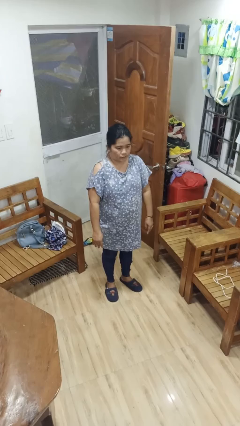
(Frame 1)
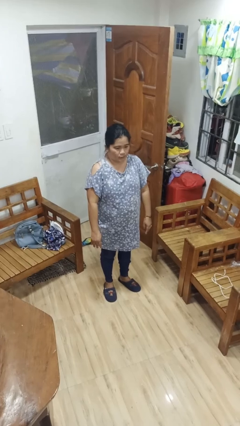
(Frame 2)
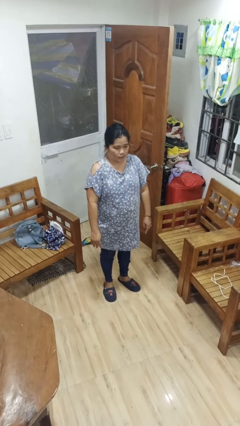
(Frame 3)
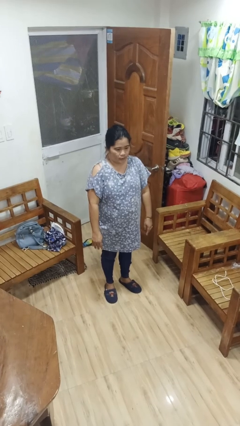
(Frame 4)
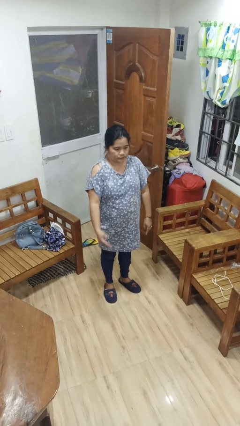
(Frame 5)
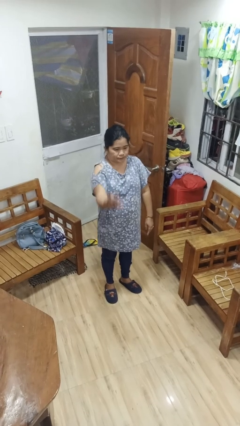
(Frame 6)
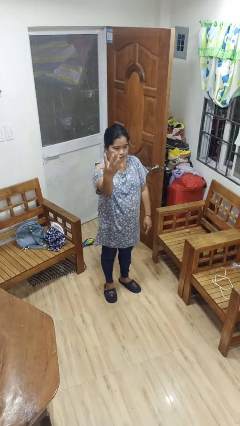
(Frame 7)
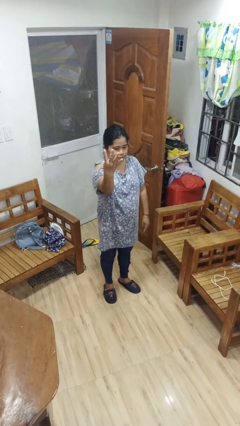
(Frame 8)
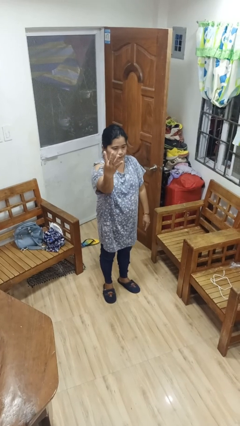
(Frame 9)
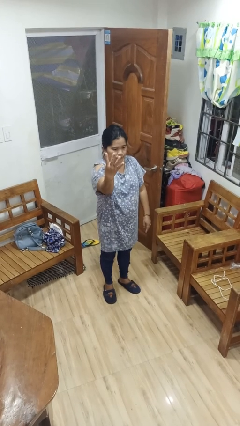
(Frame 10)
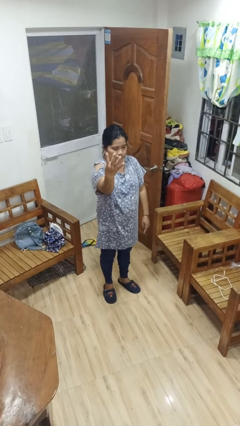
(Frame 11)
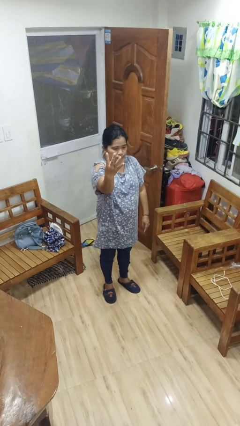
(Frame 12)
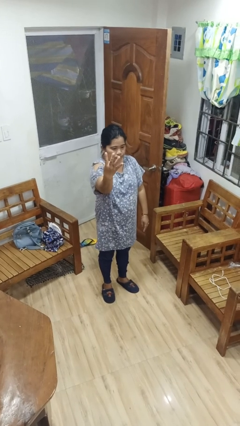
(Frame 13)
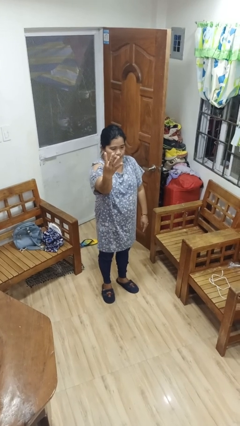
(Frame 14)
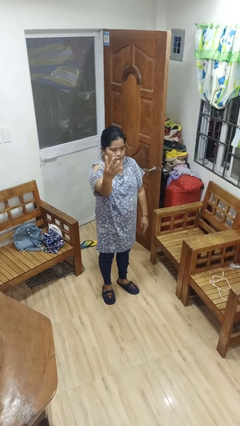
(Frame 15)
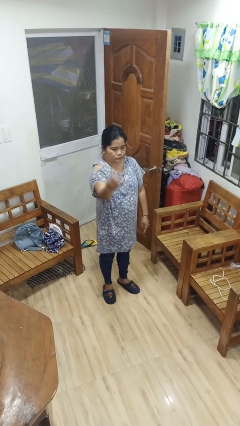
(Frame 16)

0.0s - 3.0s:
person gestures number four

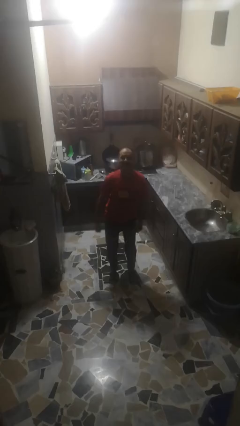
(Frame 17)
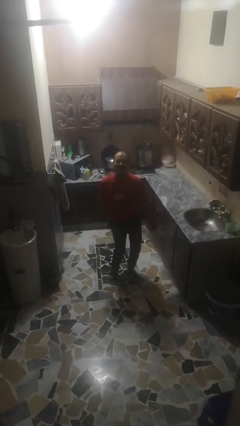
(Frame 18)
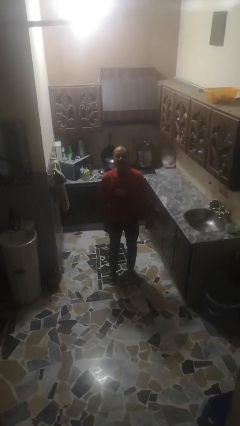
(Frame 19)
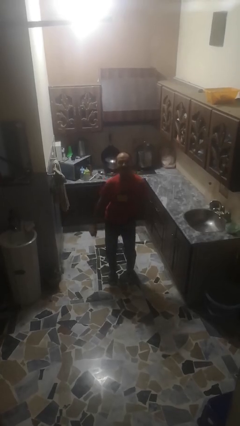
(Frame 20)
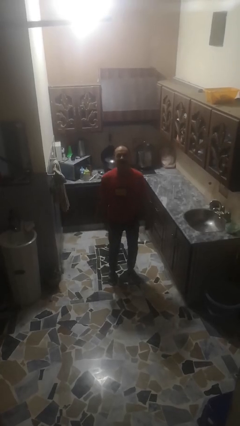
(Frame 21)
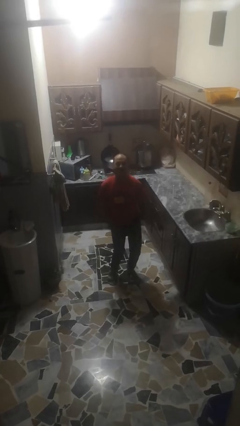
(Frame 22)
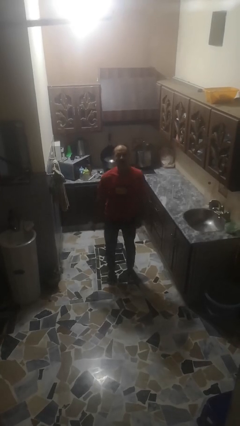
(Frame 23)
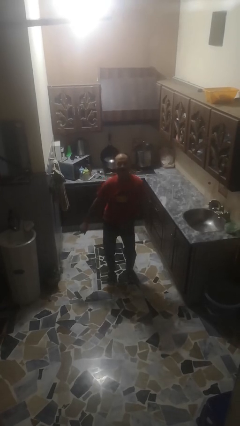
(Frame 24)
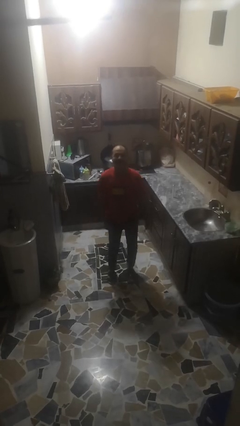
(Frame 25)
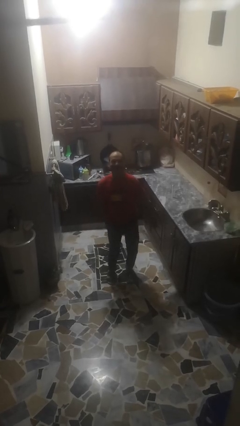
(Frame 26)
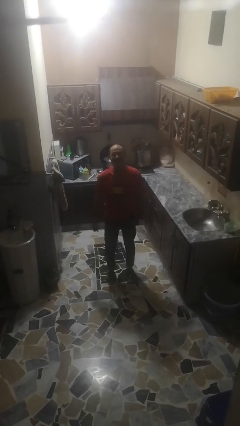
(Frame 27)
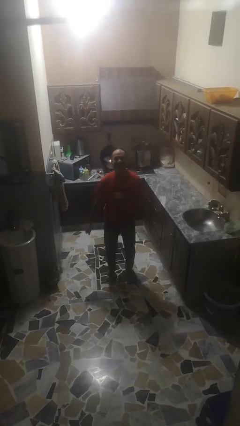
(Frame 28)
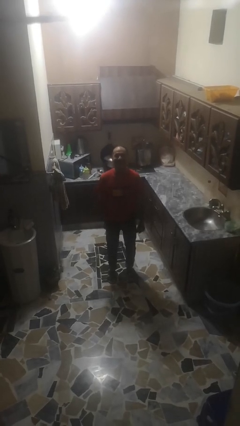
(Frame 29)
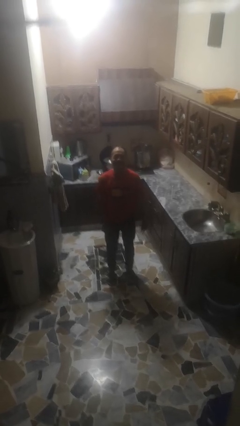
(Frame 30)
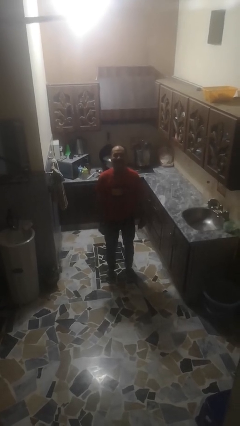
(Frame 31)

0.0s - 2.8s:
person wiggles hips

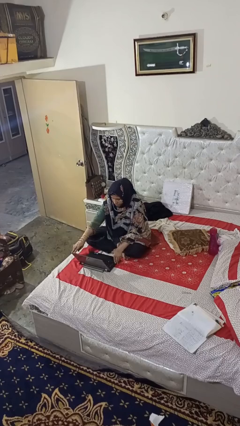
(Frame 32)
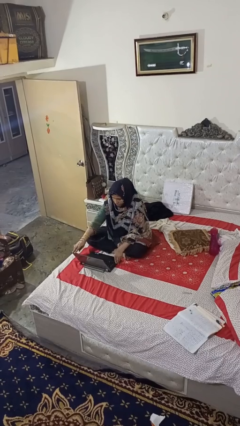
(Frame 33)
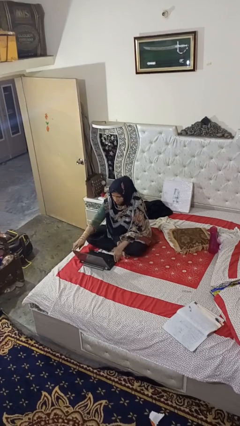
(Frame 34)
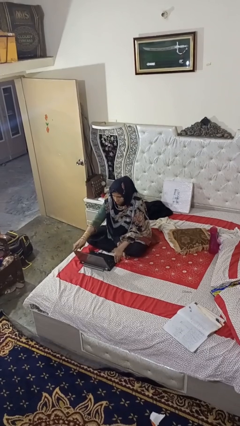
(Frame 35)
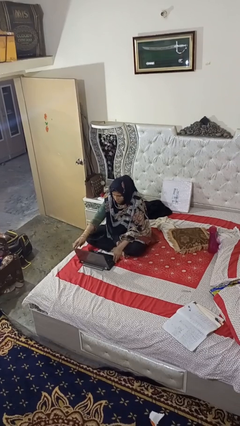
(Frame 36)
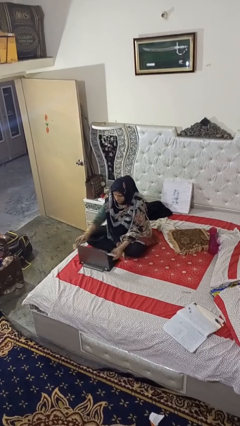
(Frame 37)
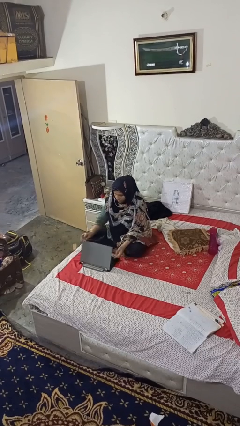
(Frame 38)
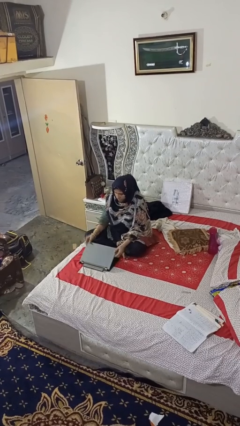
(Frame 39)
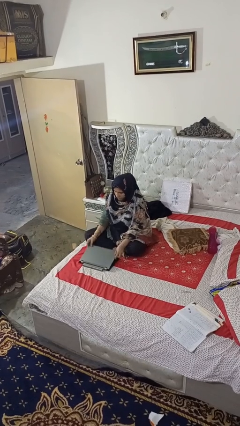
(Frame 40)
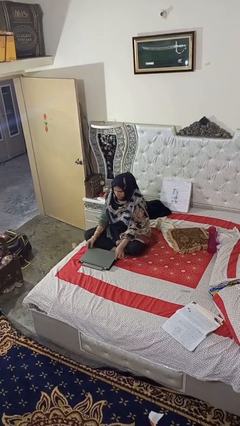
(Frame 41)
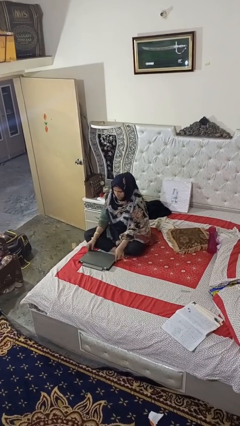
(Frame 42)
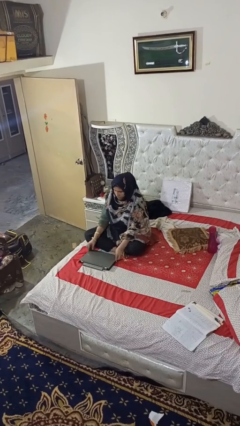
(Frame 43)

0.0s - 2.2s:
person closes laptop

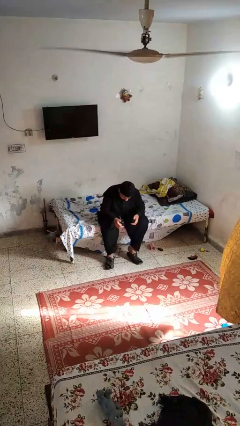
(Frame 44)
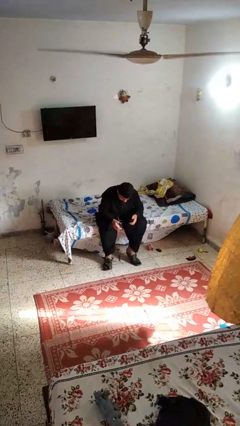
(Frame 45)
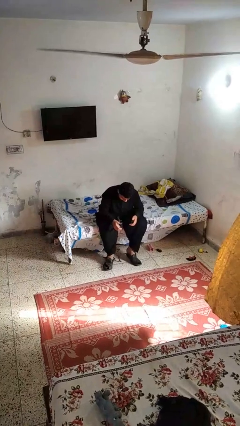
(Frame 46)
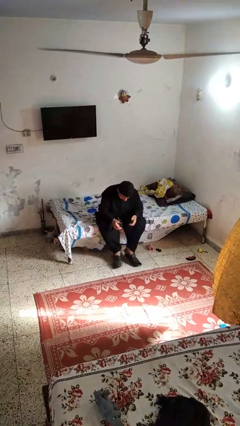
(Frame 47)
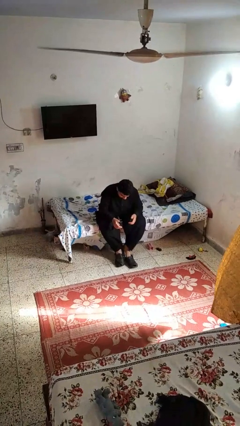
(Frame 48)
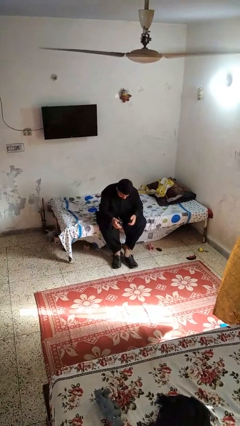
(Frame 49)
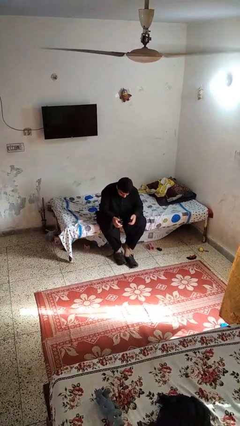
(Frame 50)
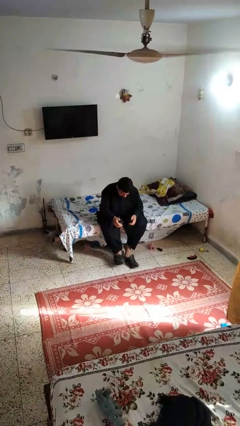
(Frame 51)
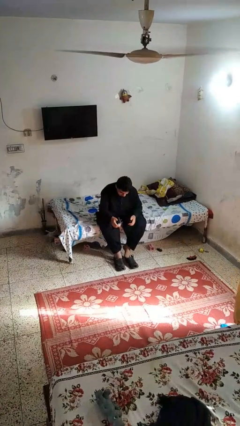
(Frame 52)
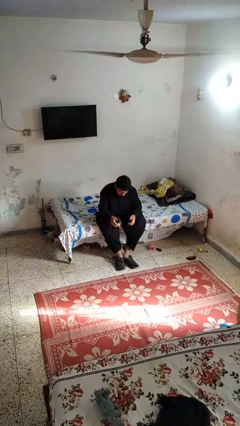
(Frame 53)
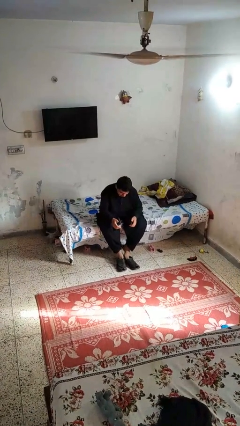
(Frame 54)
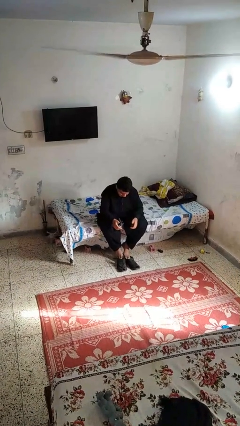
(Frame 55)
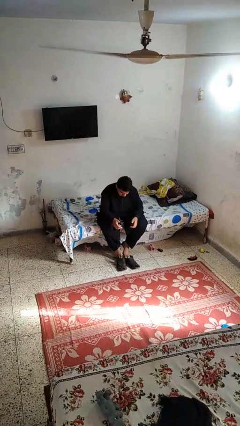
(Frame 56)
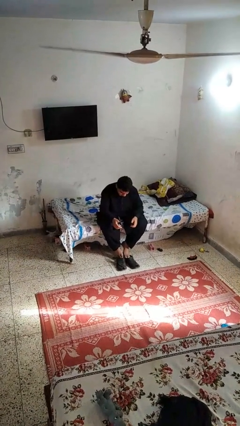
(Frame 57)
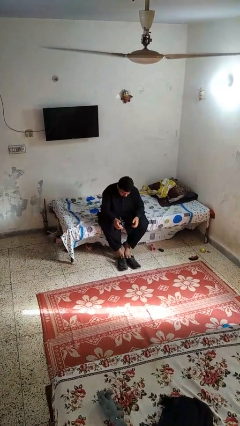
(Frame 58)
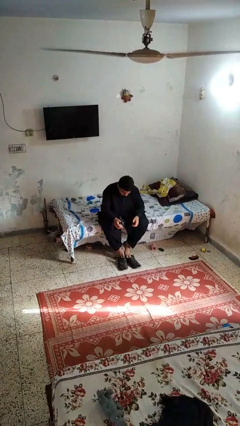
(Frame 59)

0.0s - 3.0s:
person takes off shoes

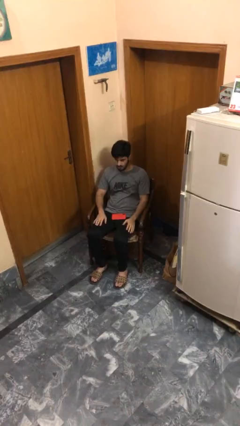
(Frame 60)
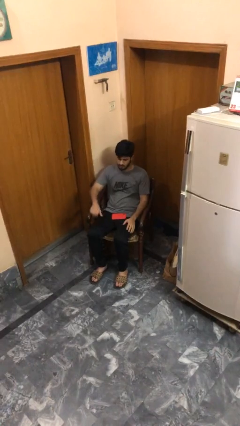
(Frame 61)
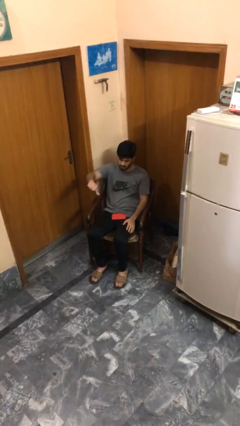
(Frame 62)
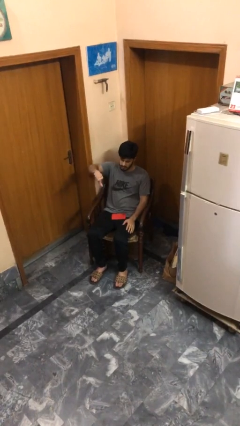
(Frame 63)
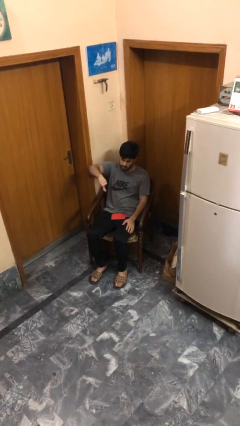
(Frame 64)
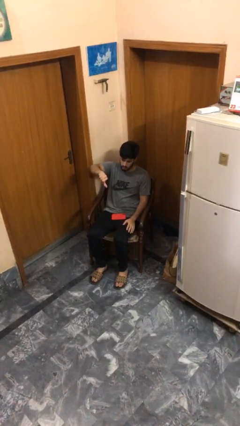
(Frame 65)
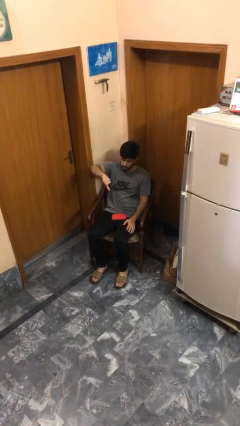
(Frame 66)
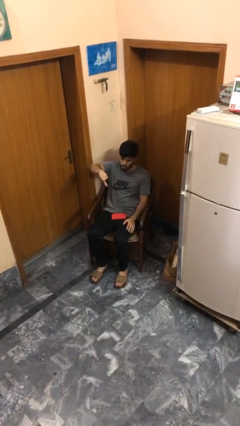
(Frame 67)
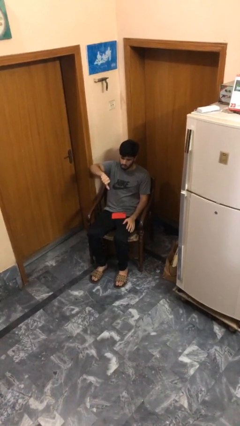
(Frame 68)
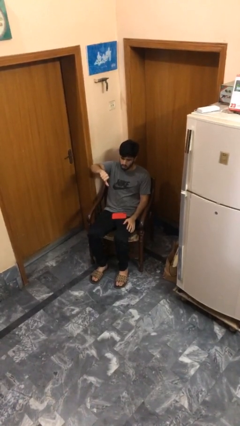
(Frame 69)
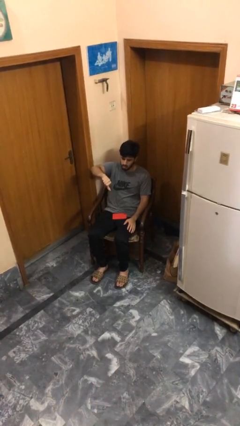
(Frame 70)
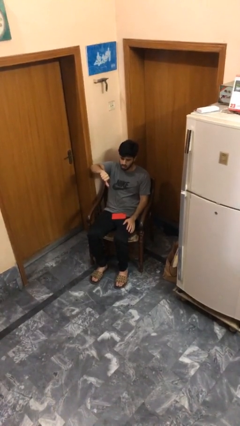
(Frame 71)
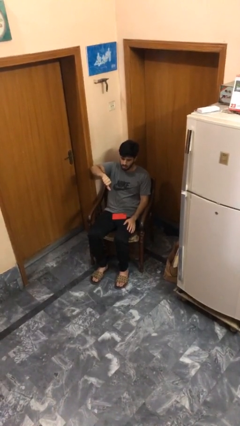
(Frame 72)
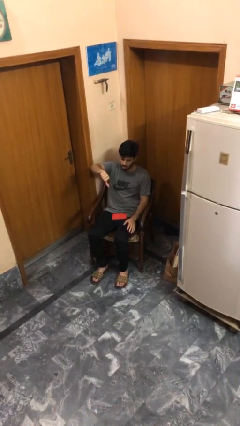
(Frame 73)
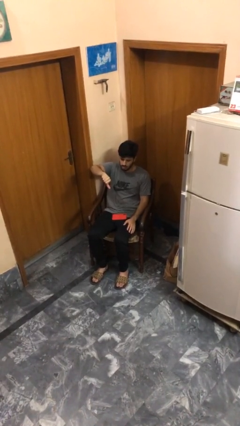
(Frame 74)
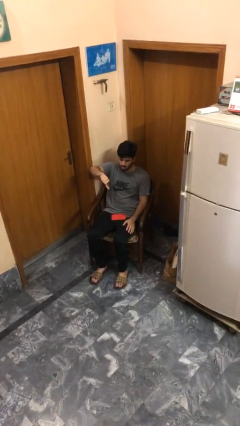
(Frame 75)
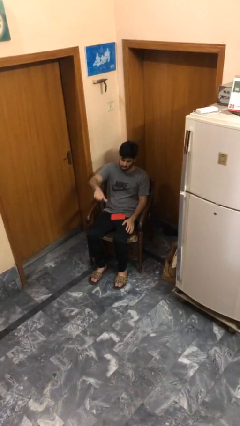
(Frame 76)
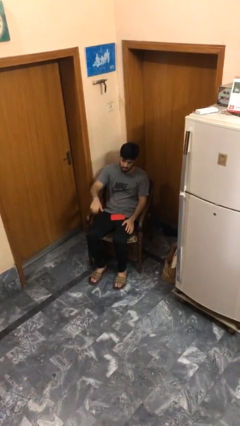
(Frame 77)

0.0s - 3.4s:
person gestures thumbs down

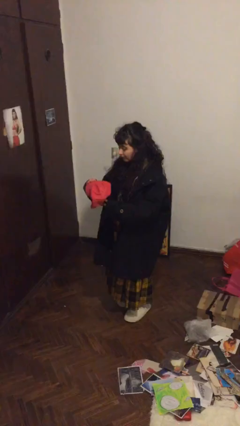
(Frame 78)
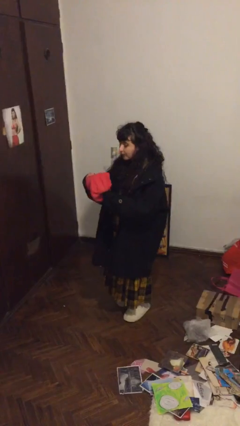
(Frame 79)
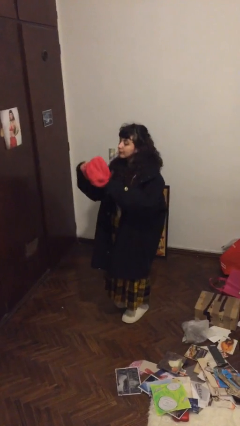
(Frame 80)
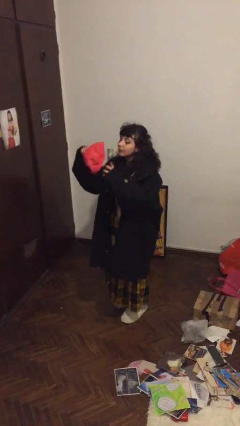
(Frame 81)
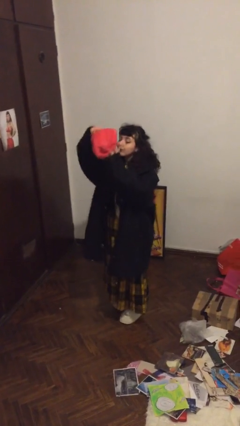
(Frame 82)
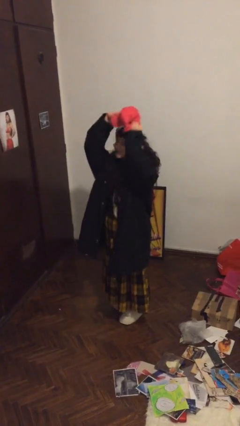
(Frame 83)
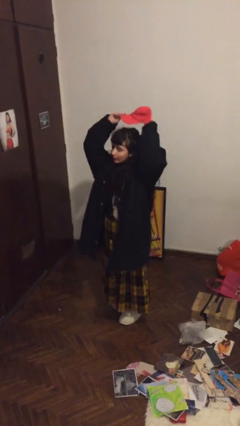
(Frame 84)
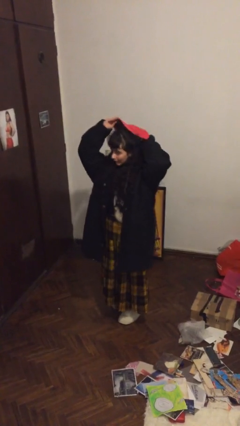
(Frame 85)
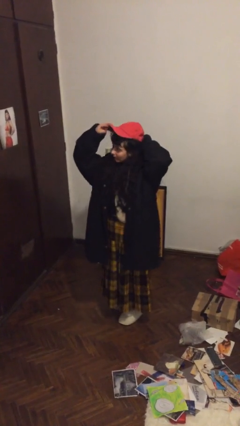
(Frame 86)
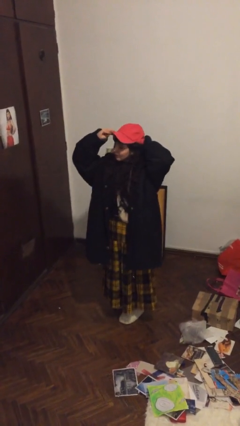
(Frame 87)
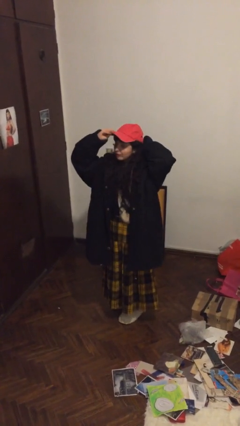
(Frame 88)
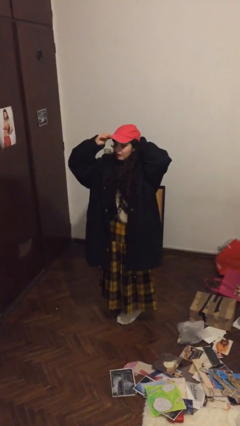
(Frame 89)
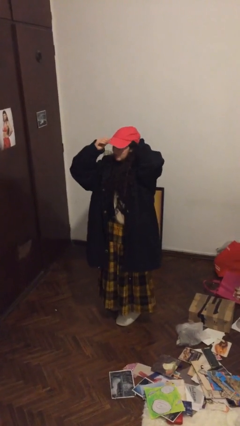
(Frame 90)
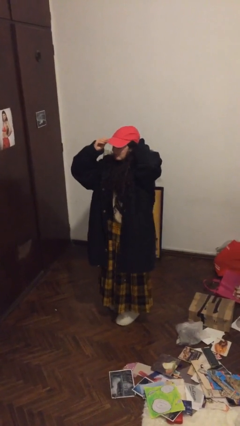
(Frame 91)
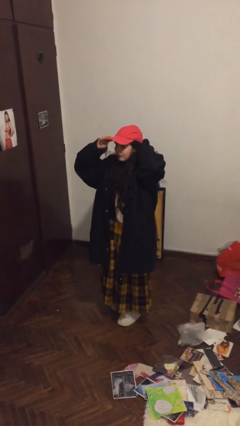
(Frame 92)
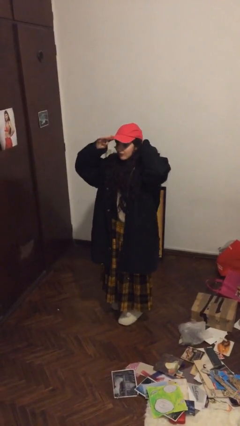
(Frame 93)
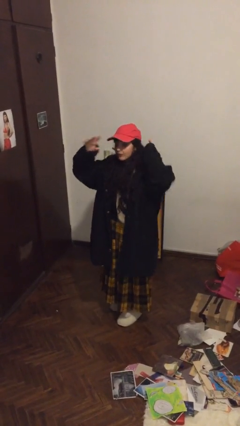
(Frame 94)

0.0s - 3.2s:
person puts on hat
